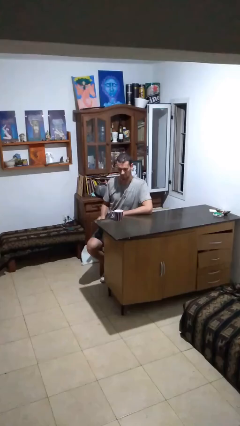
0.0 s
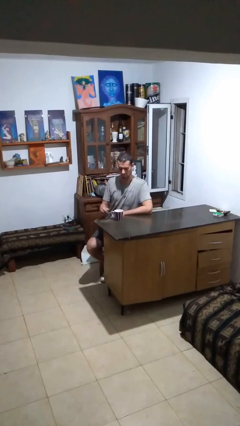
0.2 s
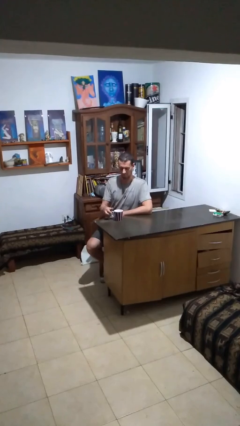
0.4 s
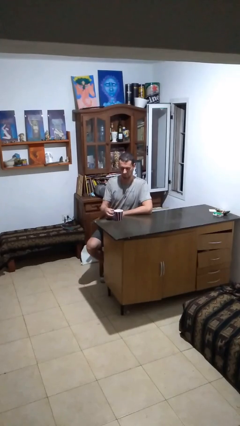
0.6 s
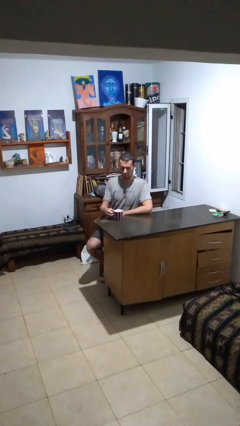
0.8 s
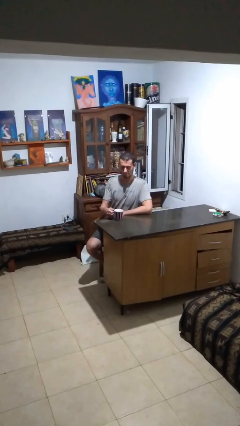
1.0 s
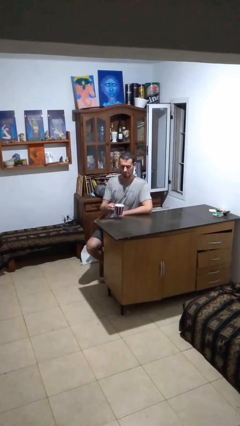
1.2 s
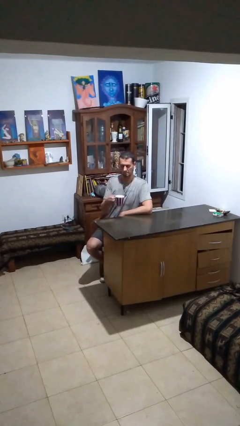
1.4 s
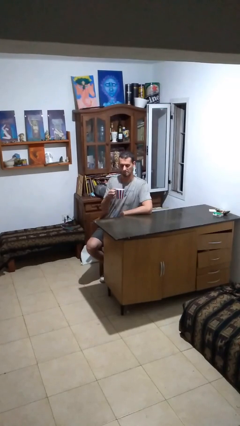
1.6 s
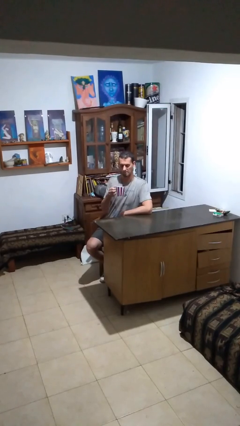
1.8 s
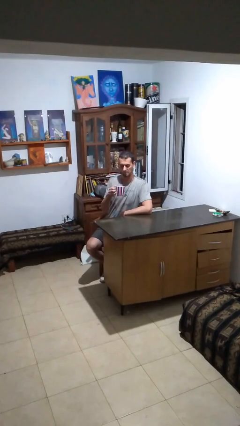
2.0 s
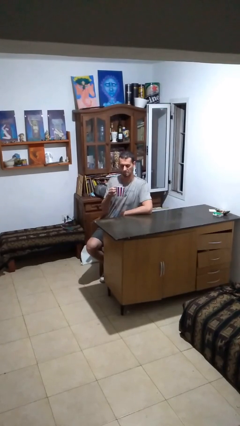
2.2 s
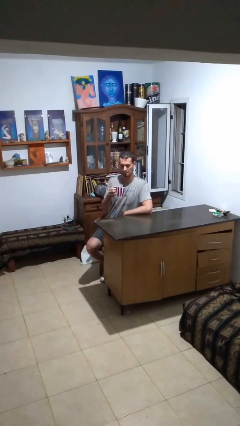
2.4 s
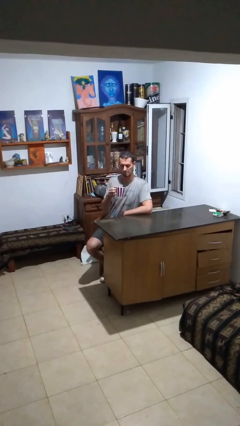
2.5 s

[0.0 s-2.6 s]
person picks up object from table

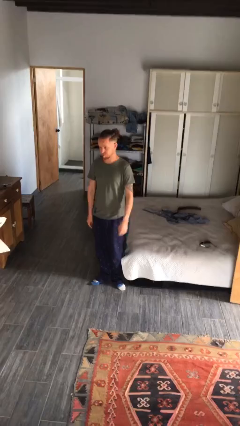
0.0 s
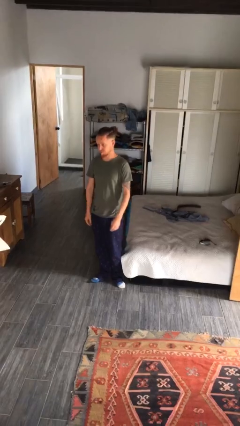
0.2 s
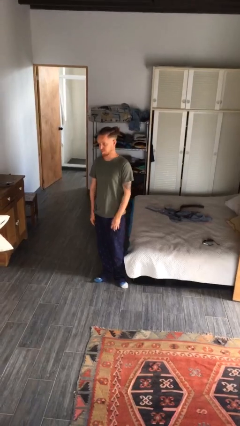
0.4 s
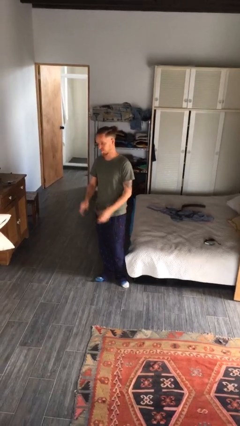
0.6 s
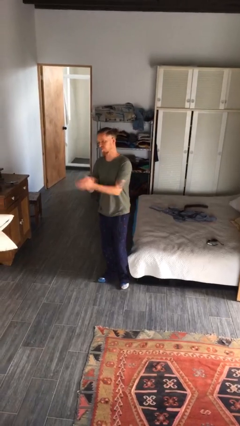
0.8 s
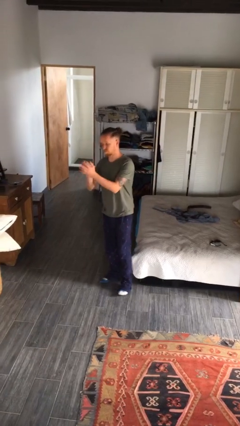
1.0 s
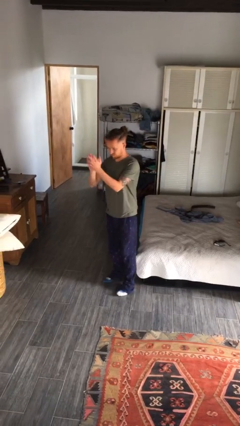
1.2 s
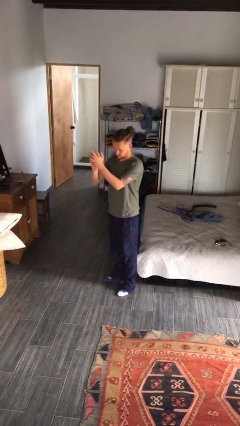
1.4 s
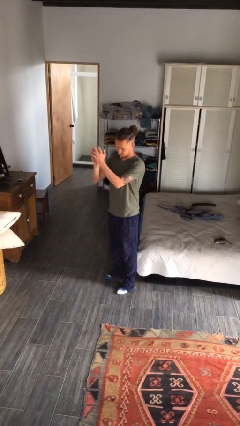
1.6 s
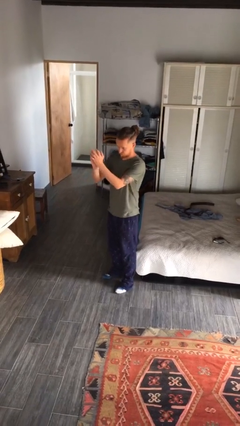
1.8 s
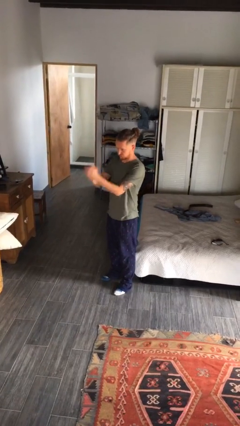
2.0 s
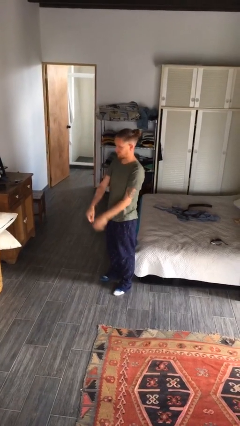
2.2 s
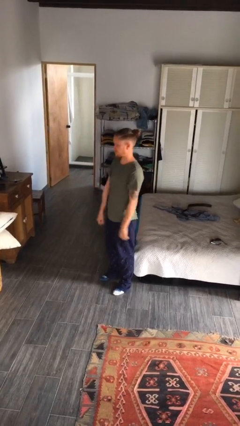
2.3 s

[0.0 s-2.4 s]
person claps hands

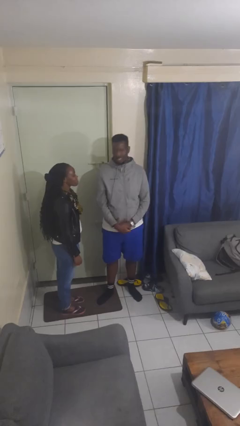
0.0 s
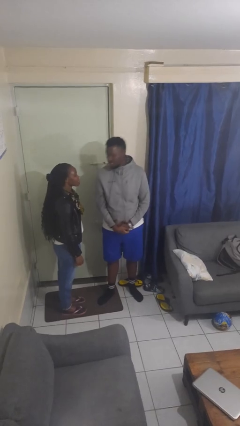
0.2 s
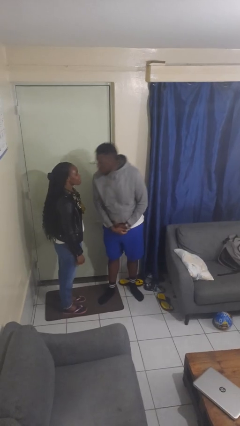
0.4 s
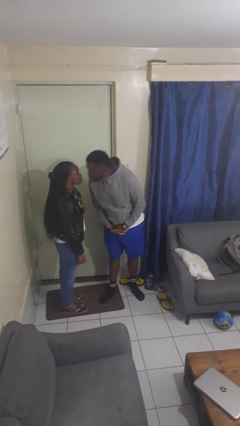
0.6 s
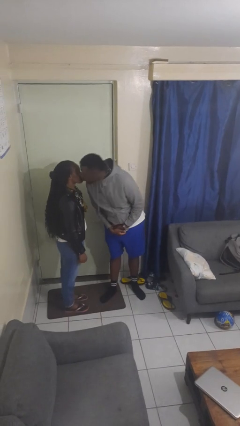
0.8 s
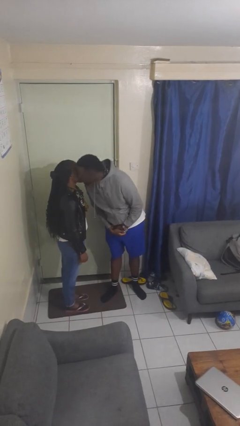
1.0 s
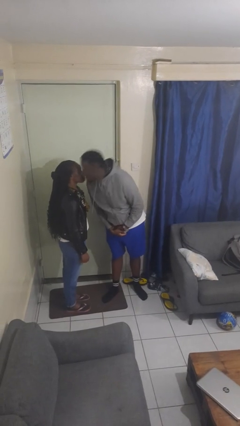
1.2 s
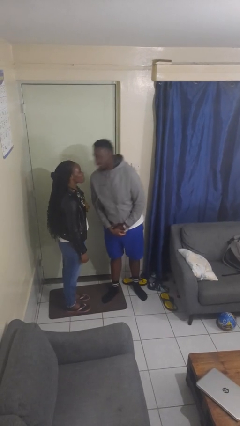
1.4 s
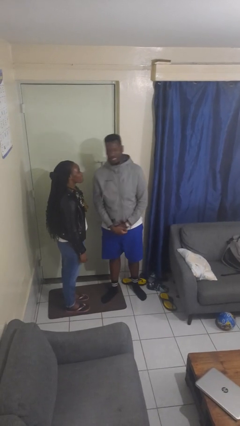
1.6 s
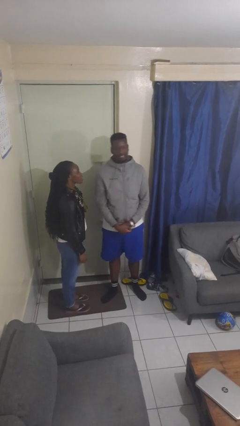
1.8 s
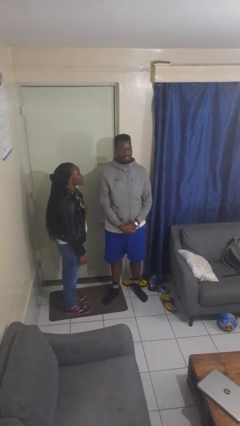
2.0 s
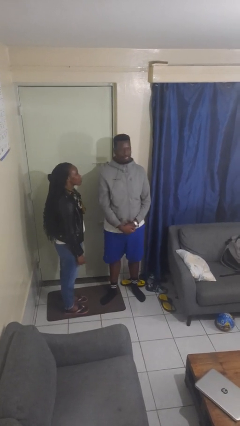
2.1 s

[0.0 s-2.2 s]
person kisses cheek of person

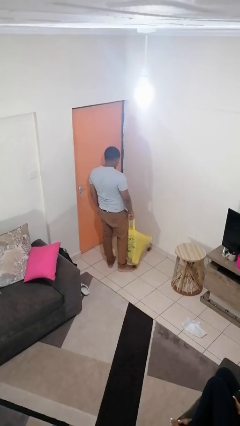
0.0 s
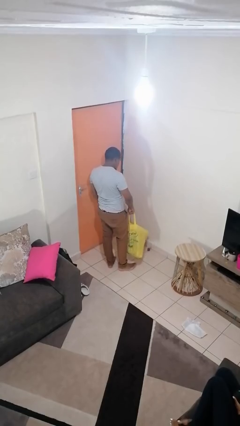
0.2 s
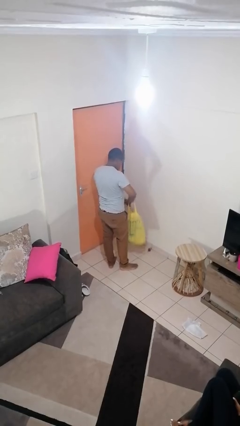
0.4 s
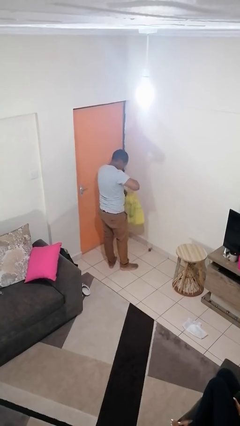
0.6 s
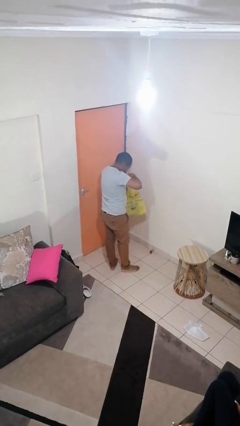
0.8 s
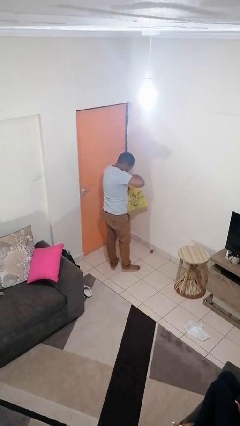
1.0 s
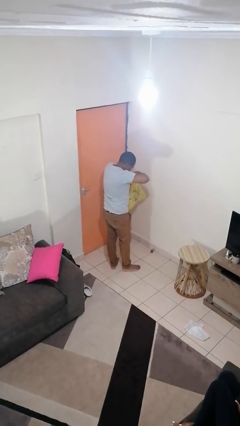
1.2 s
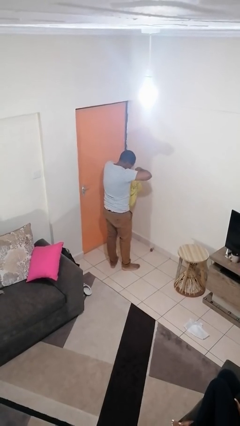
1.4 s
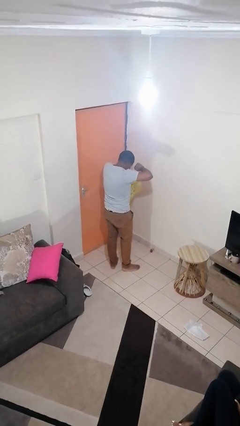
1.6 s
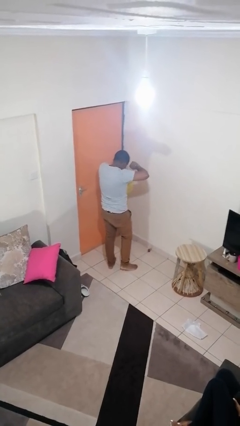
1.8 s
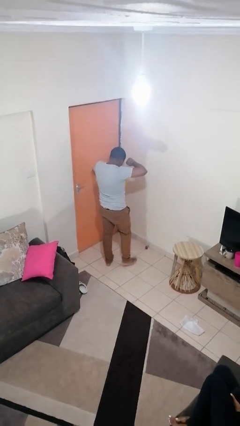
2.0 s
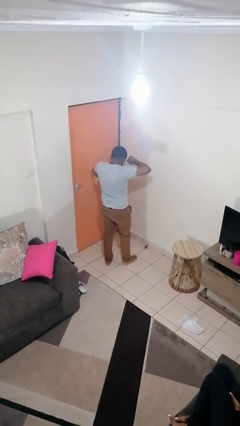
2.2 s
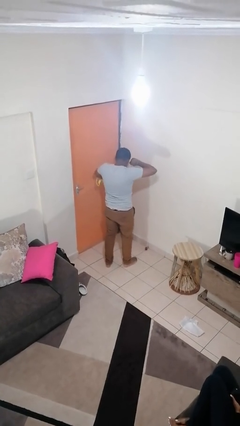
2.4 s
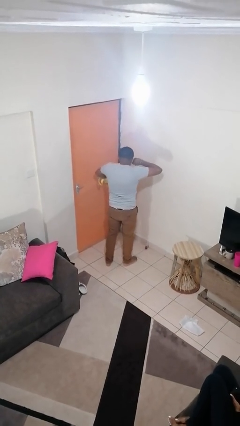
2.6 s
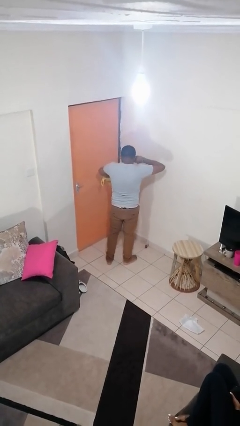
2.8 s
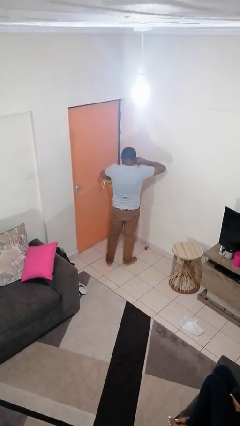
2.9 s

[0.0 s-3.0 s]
person searches in bag

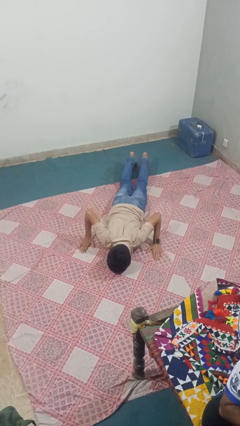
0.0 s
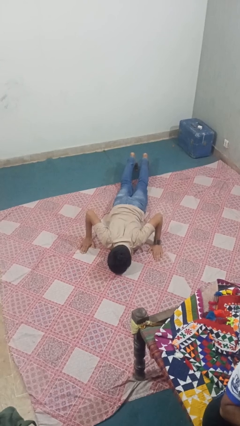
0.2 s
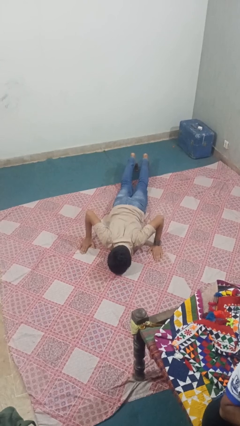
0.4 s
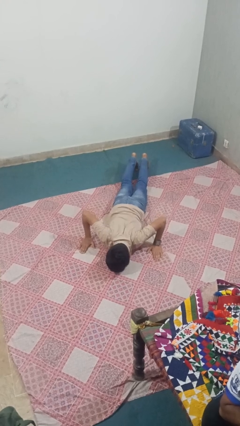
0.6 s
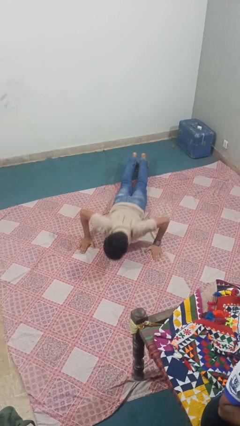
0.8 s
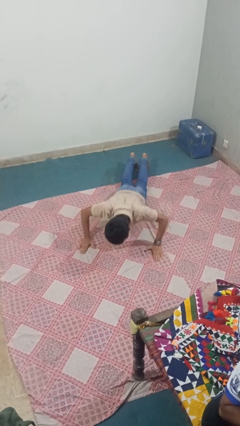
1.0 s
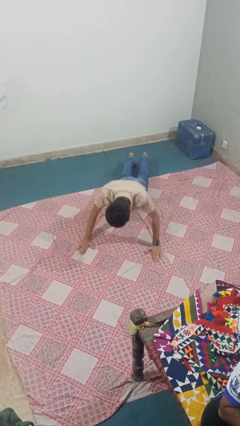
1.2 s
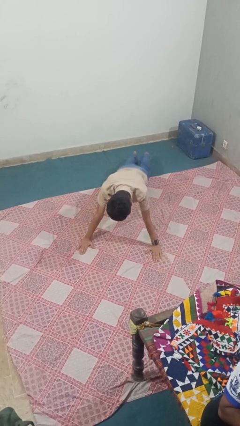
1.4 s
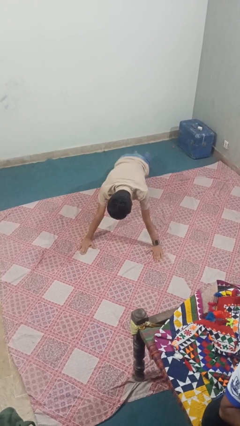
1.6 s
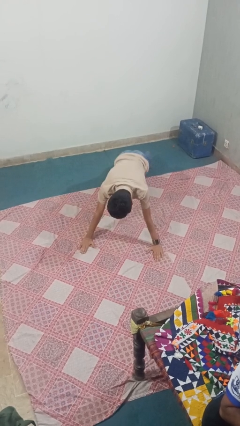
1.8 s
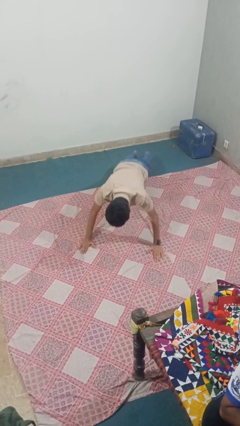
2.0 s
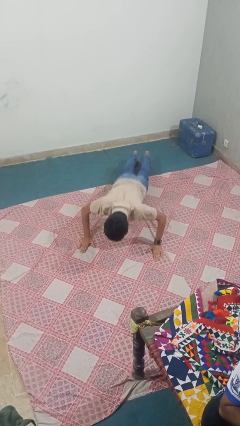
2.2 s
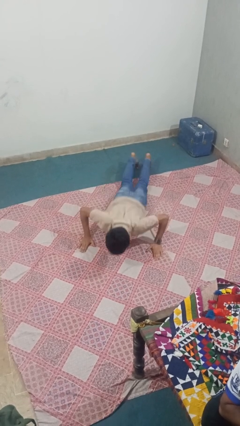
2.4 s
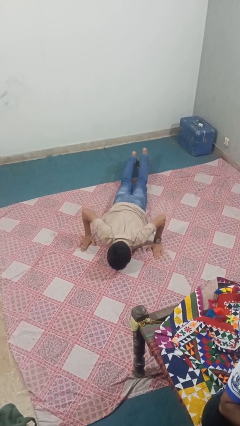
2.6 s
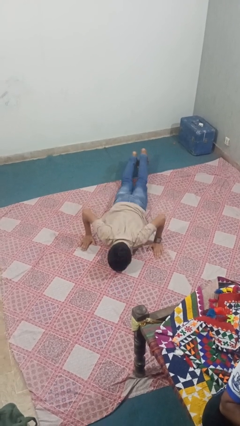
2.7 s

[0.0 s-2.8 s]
person exercises with pushup

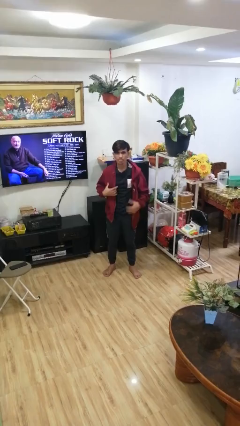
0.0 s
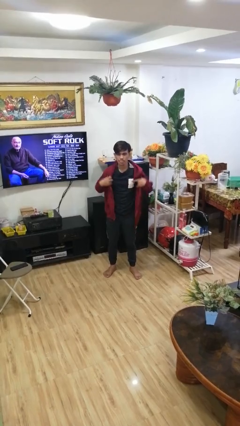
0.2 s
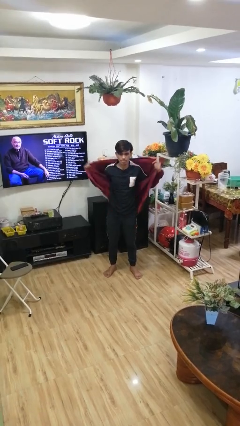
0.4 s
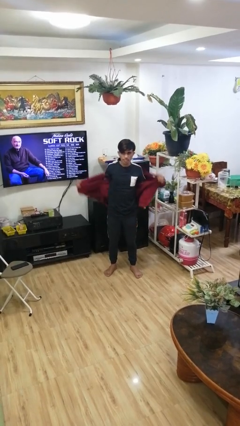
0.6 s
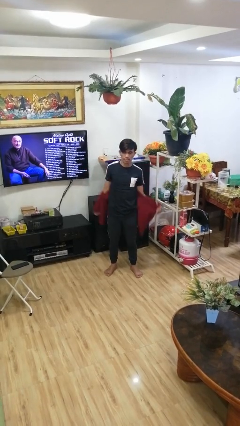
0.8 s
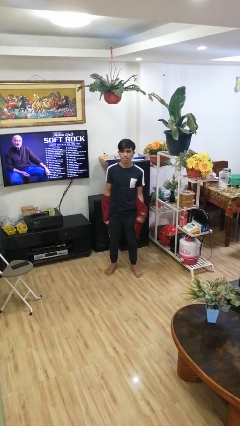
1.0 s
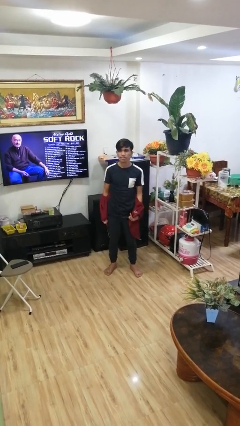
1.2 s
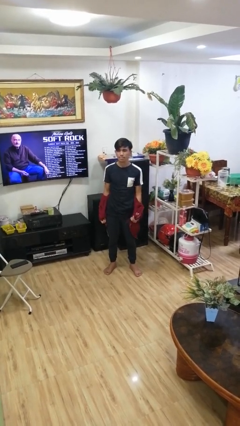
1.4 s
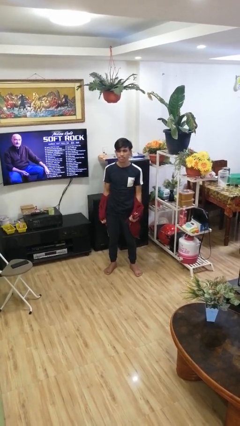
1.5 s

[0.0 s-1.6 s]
person takes off jacket

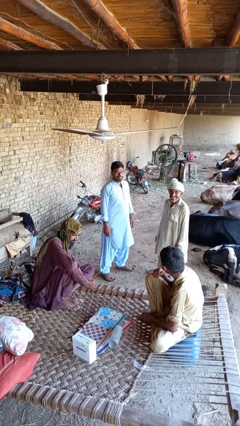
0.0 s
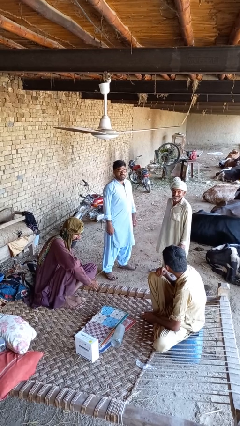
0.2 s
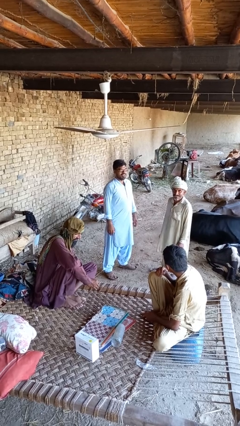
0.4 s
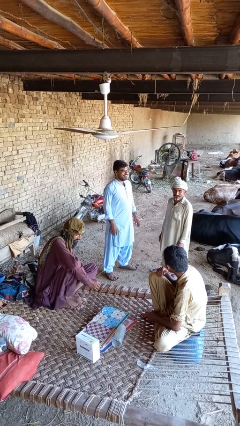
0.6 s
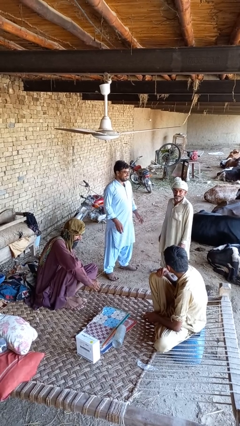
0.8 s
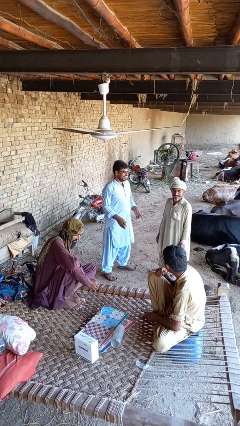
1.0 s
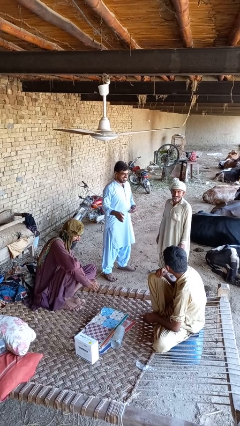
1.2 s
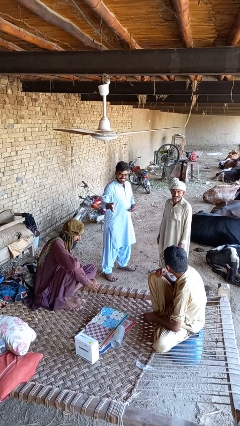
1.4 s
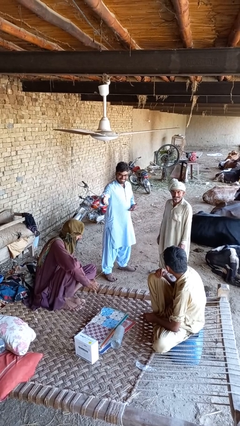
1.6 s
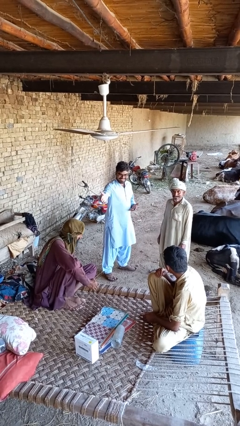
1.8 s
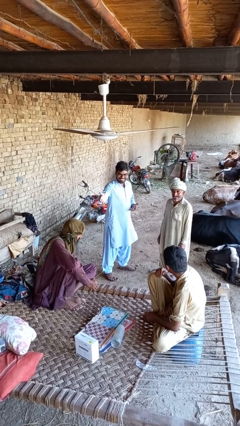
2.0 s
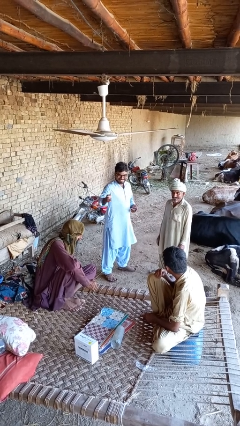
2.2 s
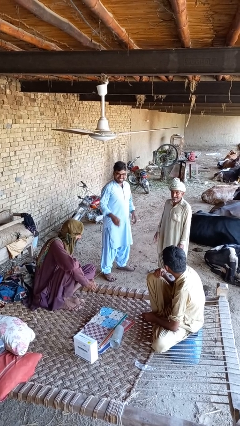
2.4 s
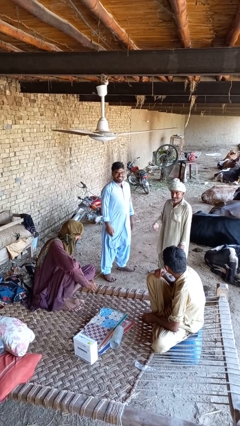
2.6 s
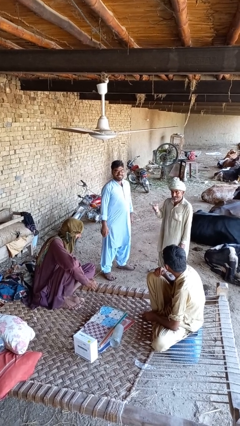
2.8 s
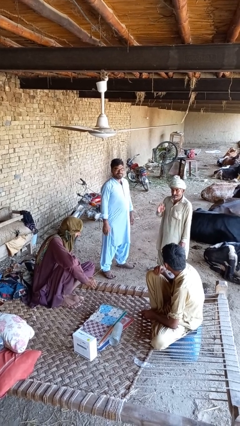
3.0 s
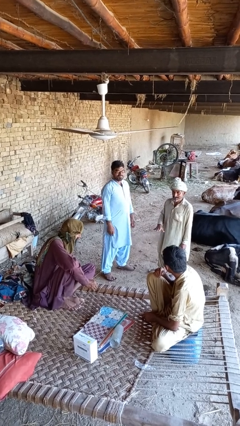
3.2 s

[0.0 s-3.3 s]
person laughs with person
